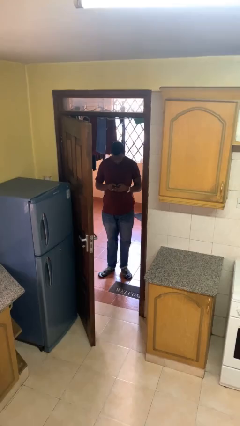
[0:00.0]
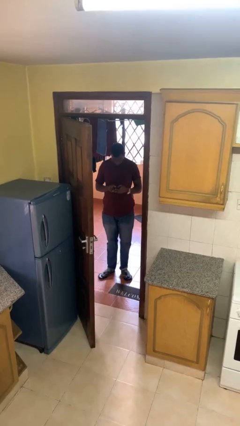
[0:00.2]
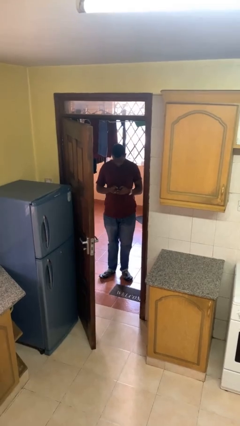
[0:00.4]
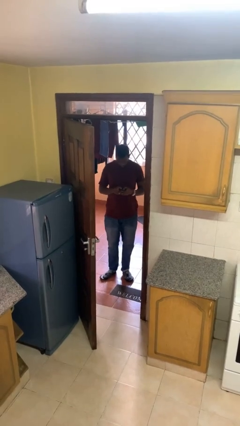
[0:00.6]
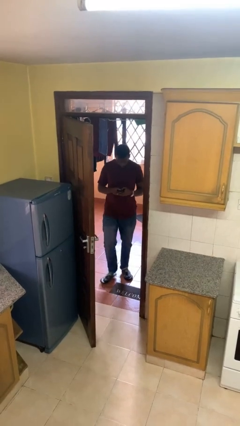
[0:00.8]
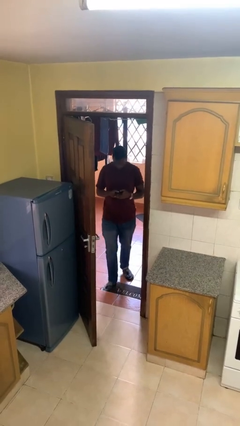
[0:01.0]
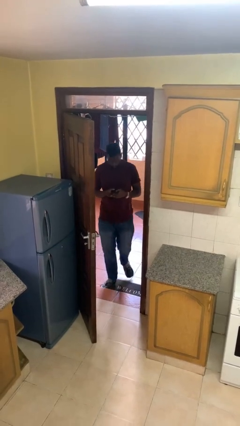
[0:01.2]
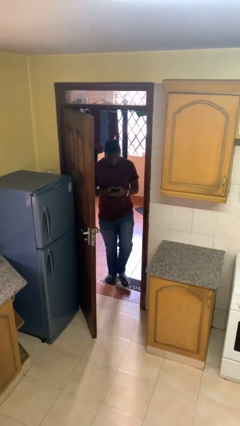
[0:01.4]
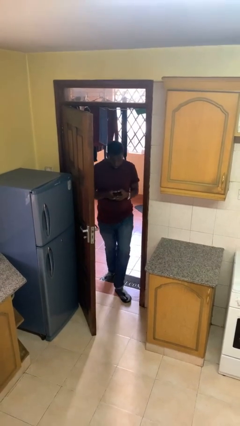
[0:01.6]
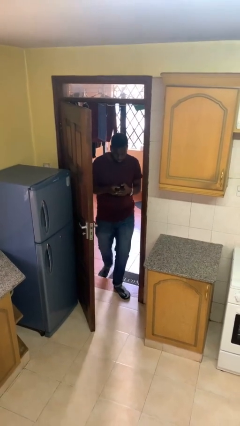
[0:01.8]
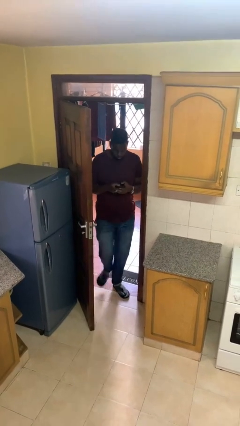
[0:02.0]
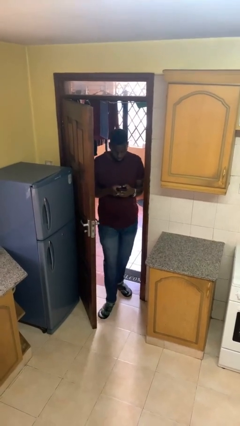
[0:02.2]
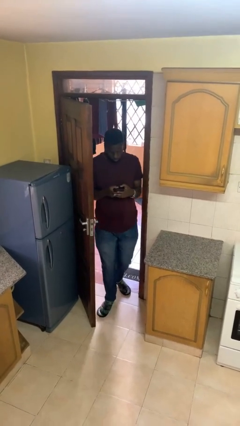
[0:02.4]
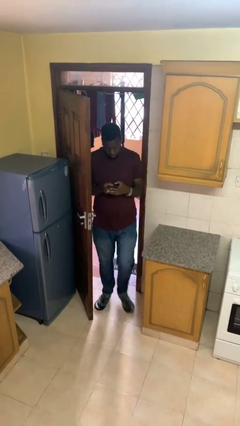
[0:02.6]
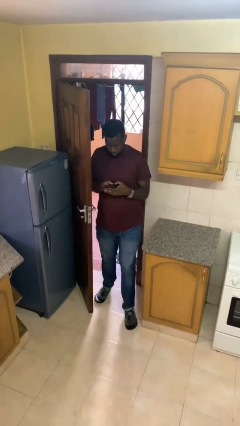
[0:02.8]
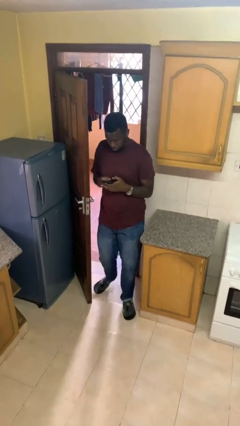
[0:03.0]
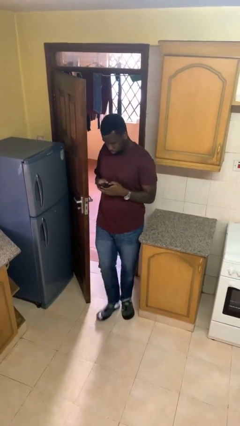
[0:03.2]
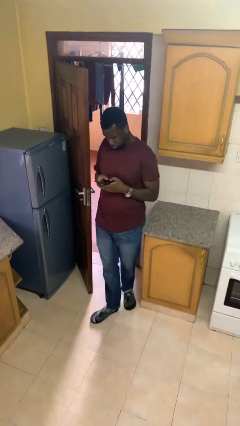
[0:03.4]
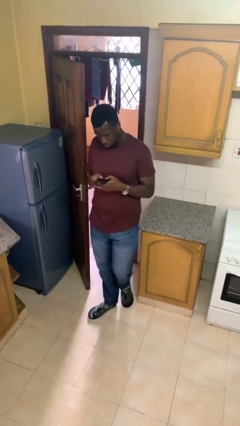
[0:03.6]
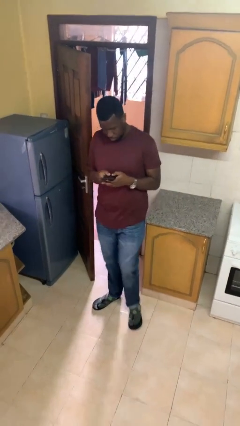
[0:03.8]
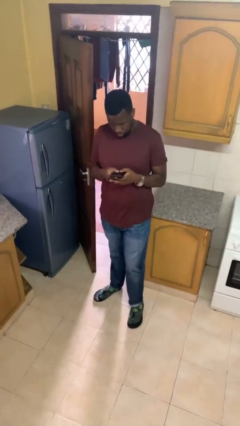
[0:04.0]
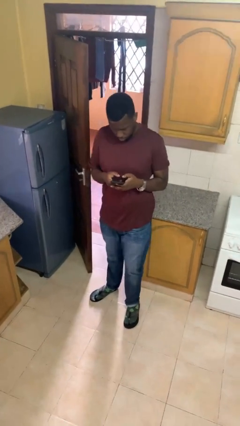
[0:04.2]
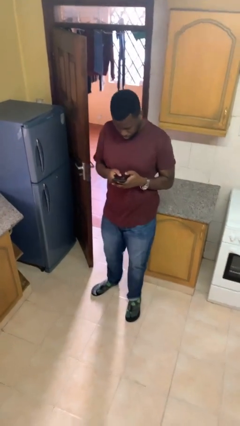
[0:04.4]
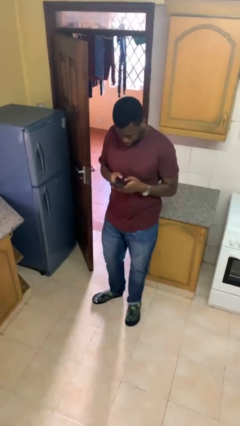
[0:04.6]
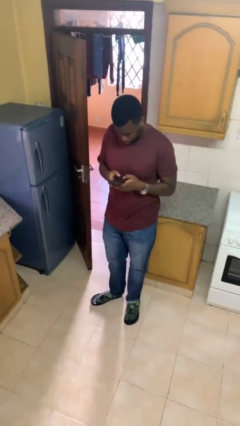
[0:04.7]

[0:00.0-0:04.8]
person enters scene through structure

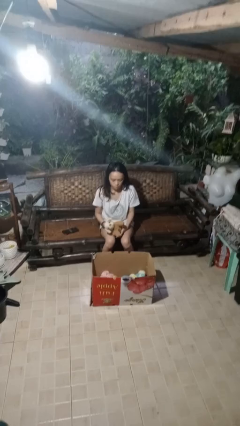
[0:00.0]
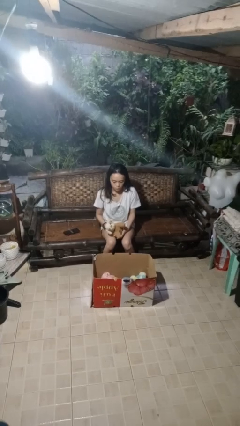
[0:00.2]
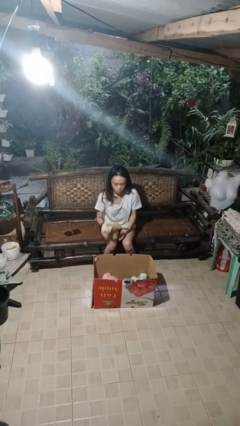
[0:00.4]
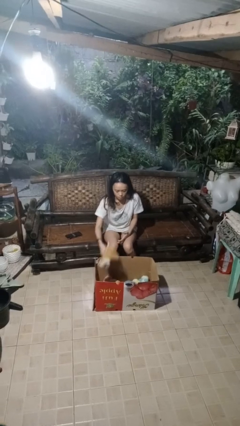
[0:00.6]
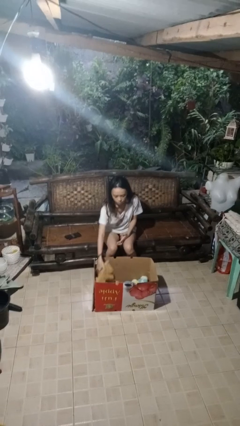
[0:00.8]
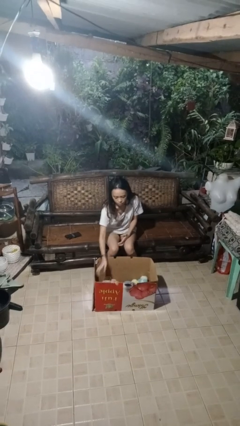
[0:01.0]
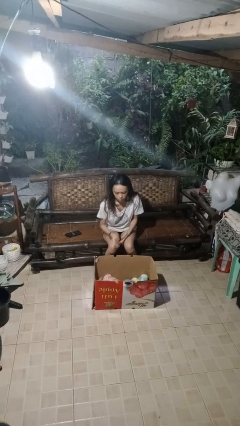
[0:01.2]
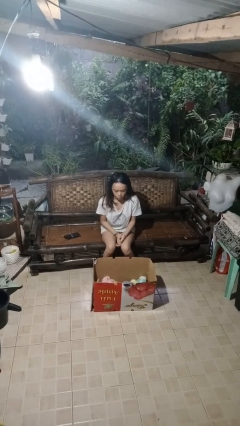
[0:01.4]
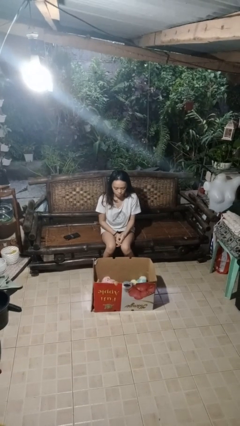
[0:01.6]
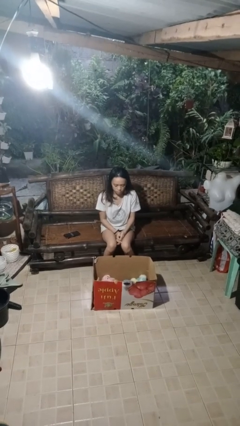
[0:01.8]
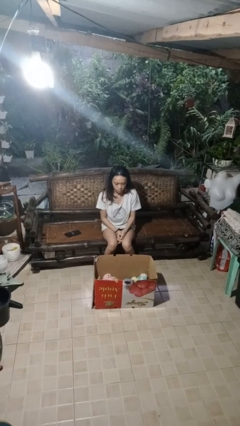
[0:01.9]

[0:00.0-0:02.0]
person puts object into box

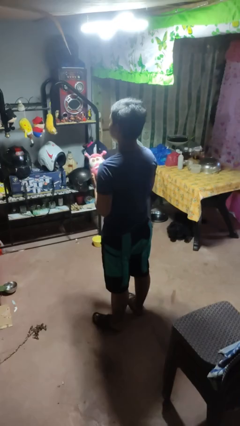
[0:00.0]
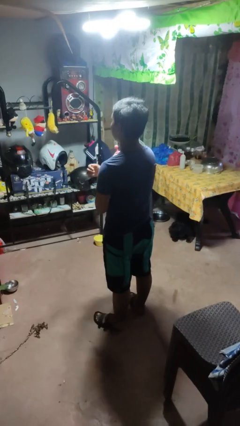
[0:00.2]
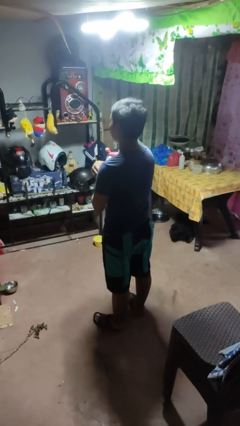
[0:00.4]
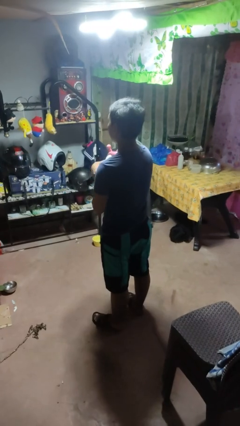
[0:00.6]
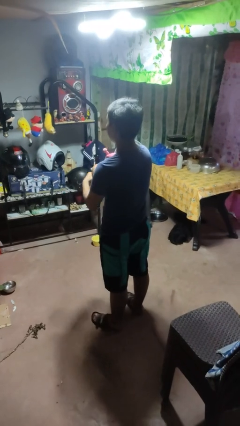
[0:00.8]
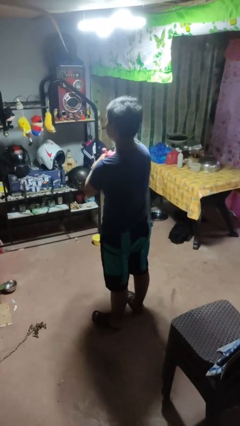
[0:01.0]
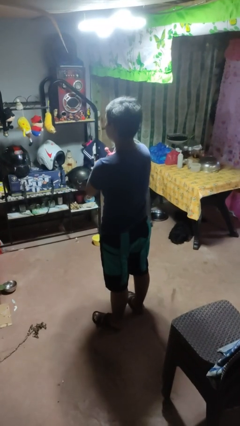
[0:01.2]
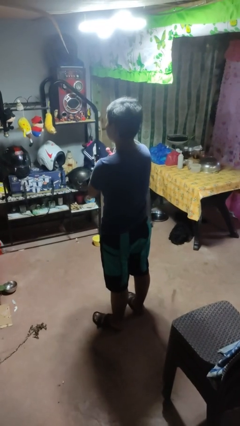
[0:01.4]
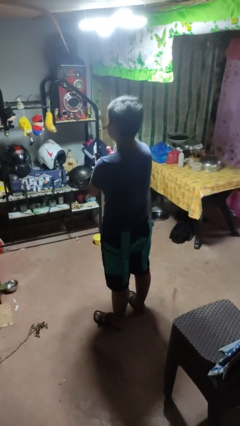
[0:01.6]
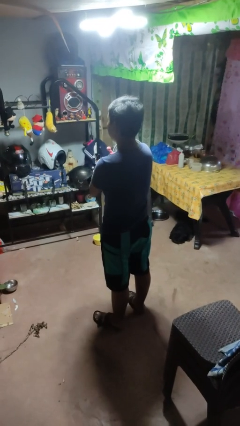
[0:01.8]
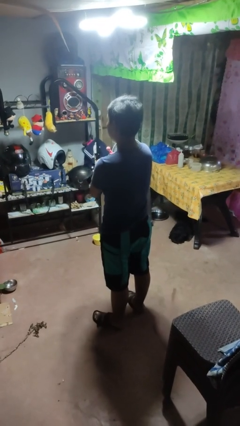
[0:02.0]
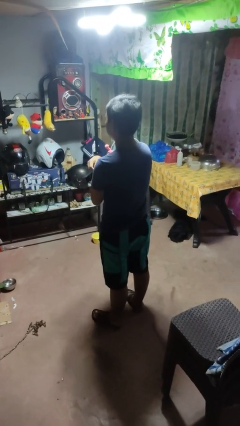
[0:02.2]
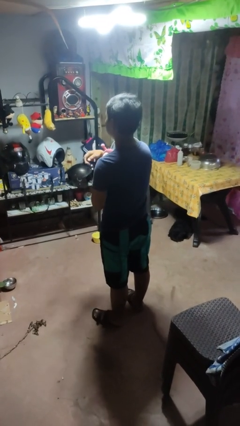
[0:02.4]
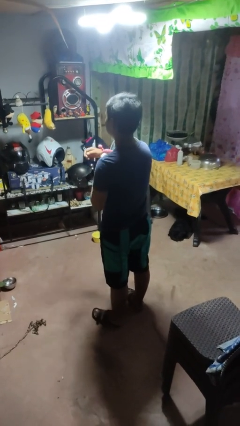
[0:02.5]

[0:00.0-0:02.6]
person hugs stuffed animal

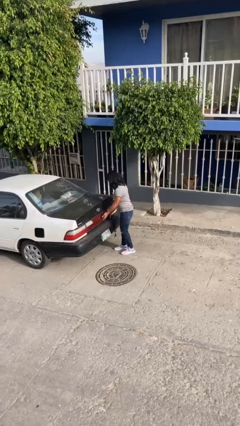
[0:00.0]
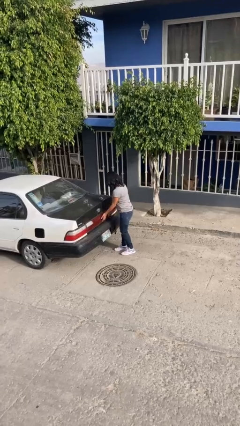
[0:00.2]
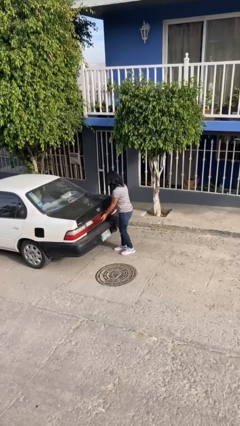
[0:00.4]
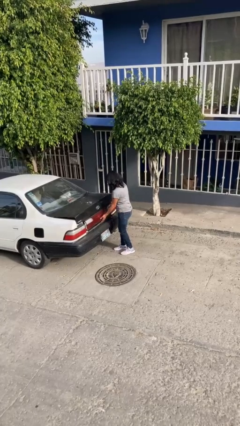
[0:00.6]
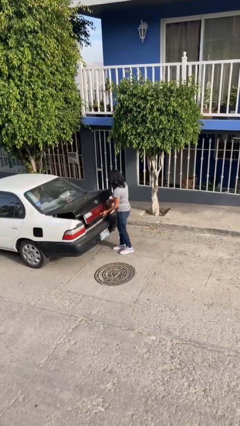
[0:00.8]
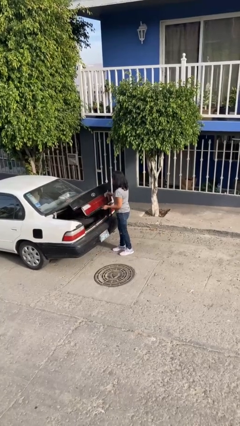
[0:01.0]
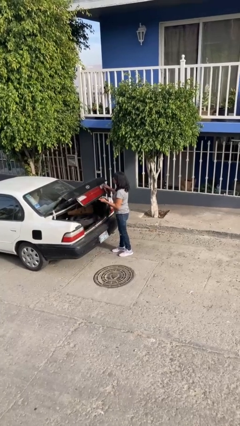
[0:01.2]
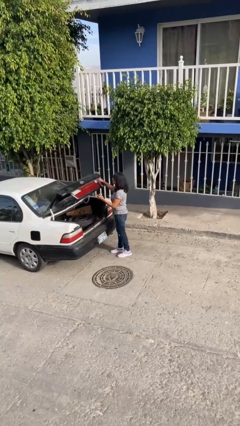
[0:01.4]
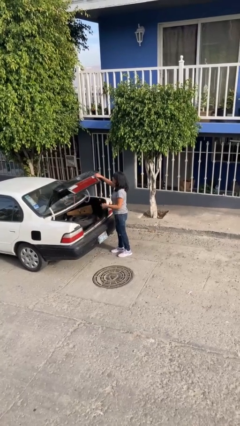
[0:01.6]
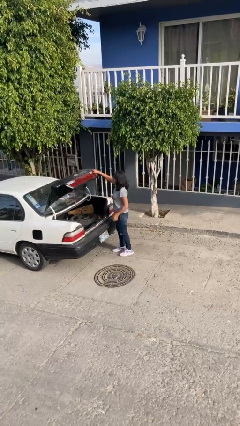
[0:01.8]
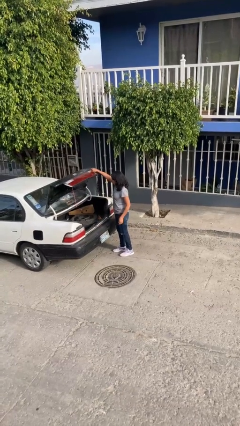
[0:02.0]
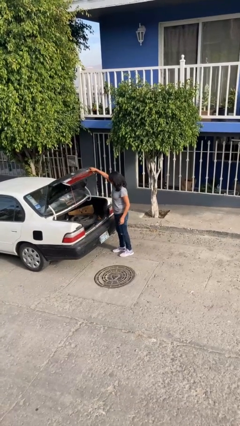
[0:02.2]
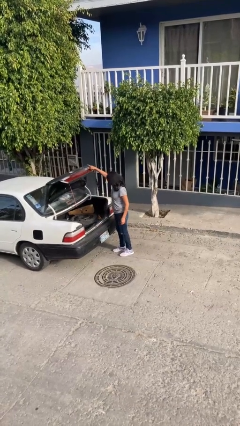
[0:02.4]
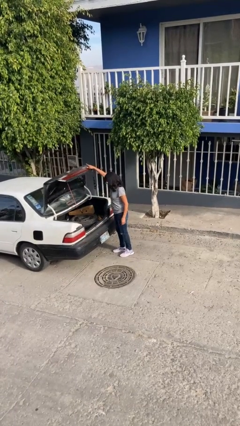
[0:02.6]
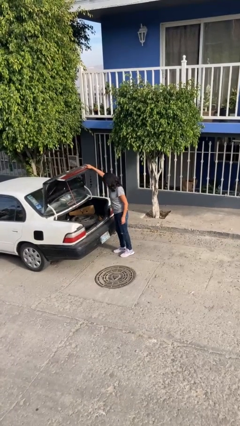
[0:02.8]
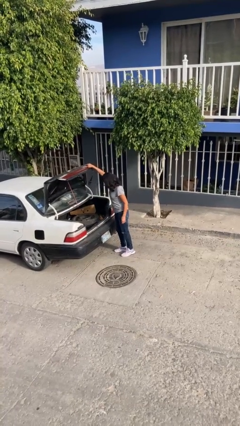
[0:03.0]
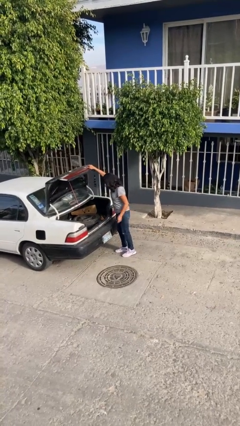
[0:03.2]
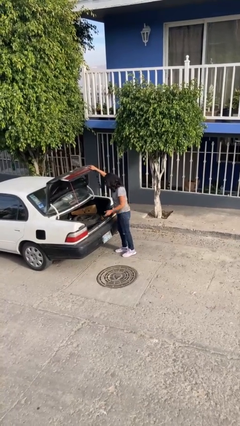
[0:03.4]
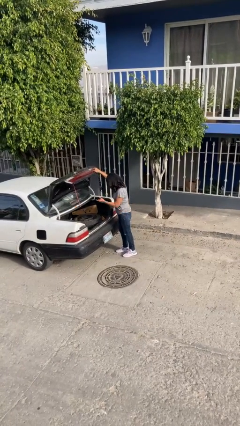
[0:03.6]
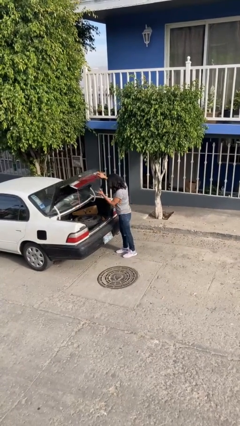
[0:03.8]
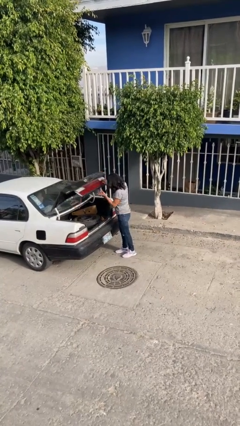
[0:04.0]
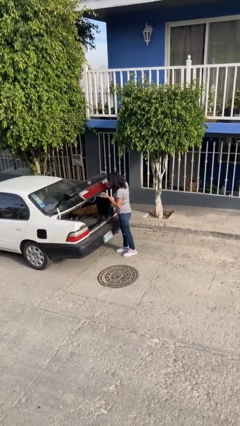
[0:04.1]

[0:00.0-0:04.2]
person opens car trunk

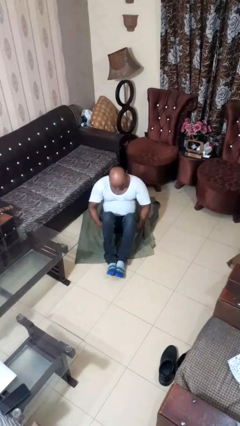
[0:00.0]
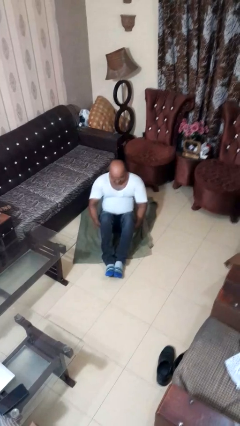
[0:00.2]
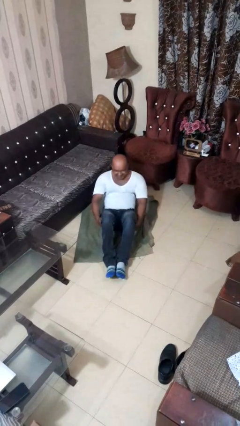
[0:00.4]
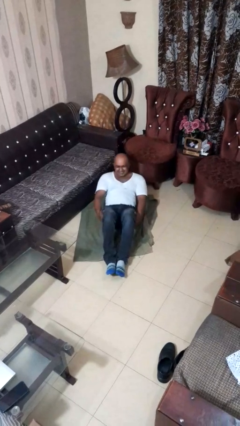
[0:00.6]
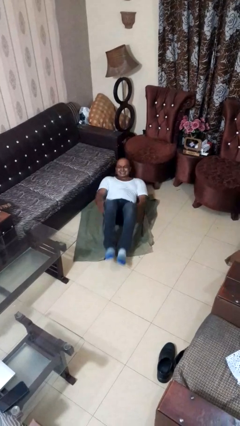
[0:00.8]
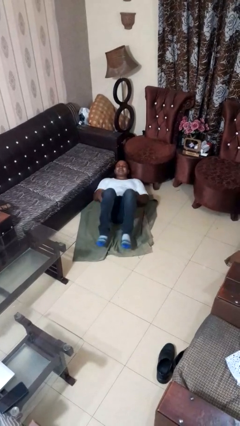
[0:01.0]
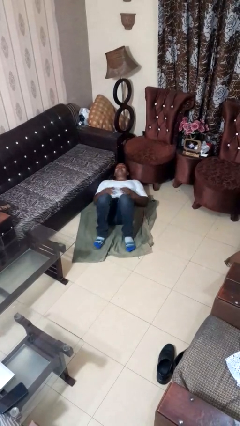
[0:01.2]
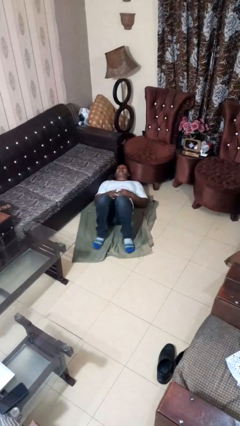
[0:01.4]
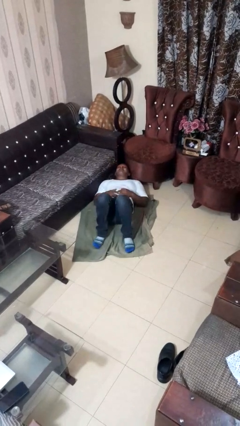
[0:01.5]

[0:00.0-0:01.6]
person exercises with situp

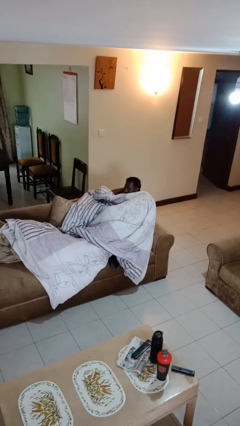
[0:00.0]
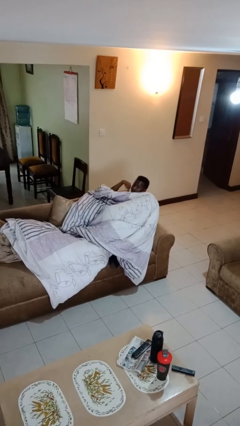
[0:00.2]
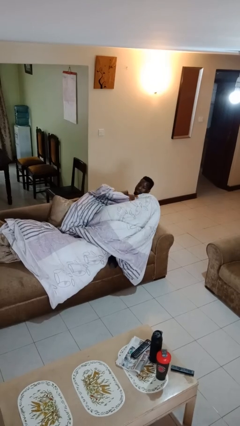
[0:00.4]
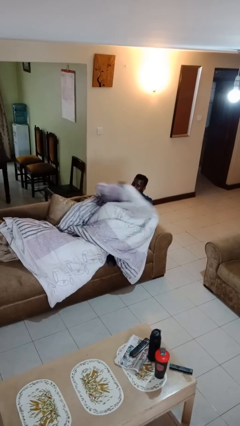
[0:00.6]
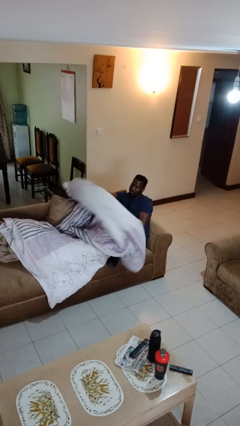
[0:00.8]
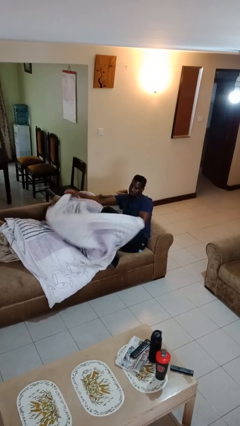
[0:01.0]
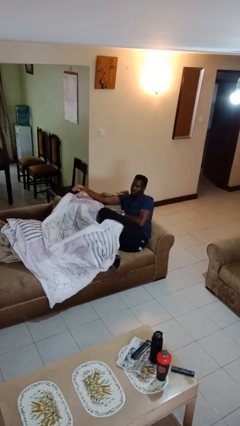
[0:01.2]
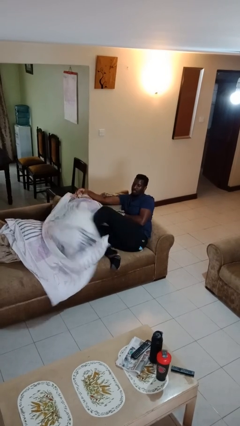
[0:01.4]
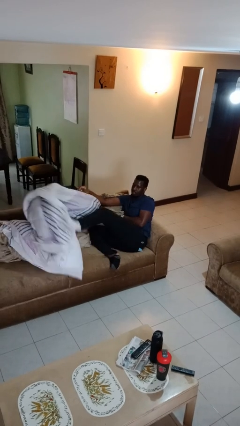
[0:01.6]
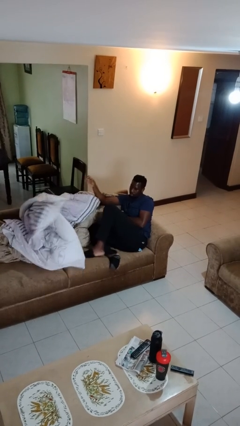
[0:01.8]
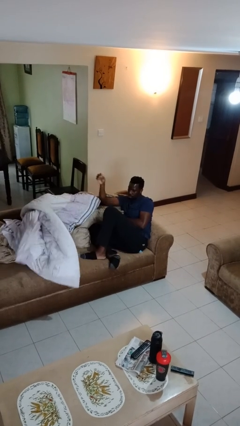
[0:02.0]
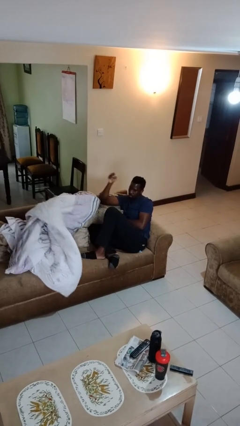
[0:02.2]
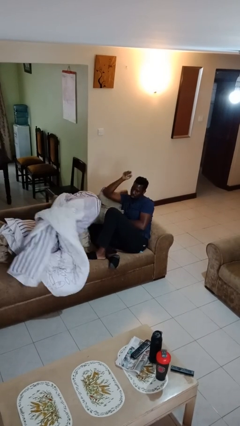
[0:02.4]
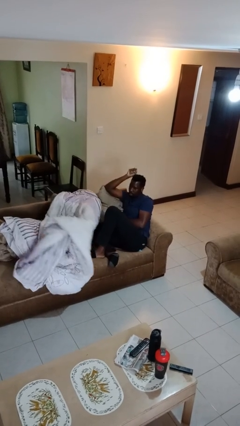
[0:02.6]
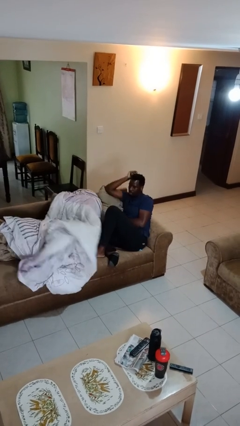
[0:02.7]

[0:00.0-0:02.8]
person uncovers with blanket
